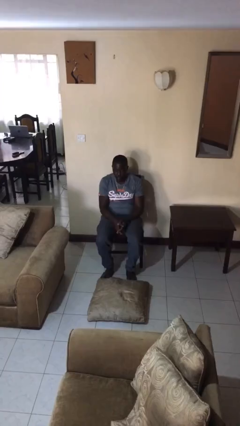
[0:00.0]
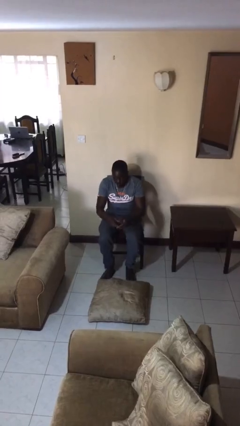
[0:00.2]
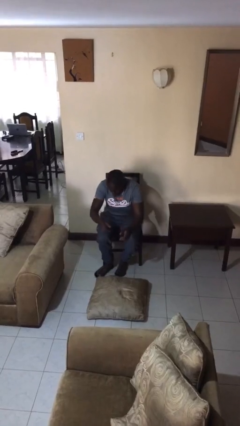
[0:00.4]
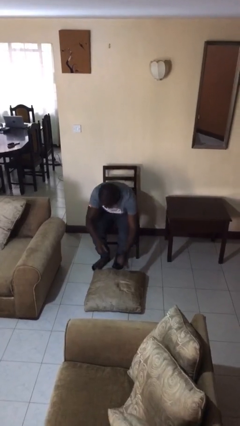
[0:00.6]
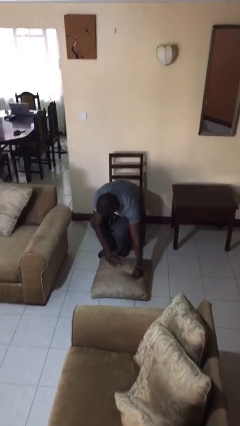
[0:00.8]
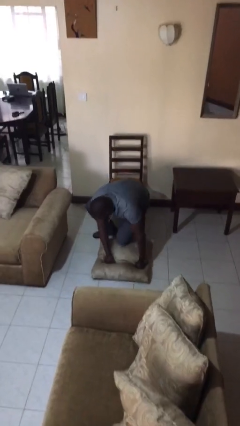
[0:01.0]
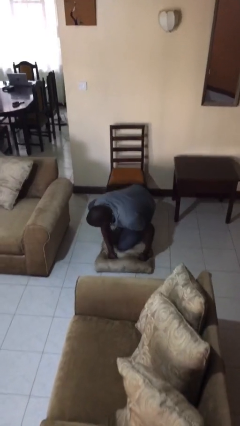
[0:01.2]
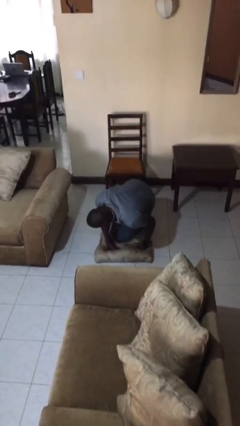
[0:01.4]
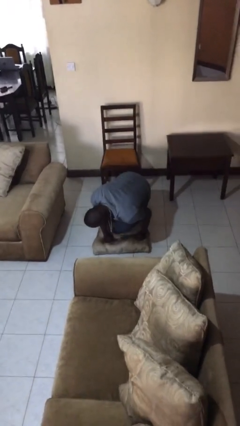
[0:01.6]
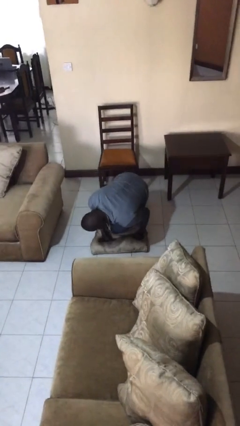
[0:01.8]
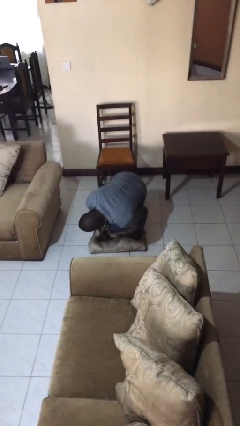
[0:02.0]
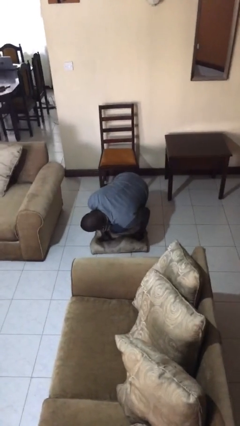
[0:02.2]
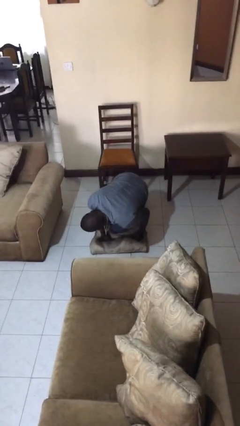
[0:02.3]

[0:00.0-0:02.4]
person falls from chair

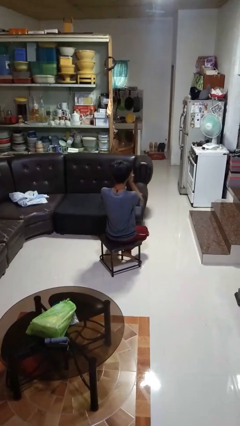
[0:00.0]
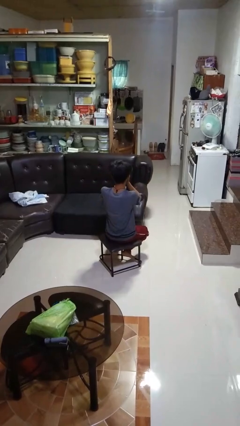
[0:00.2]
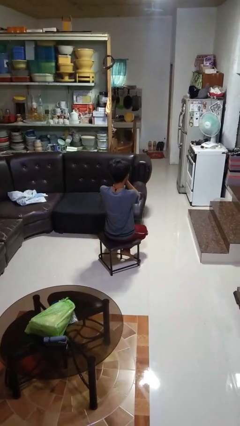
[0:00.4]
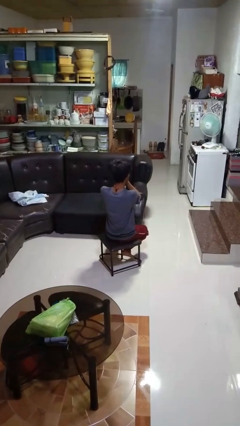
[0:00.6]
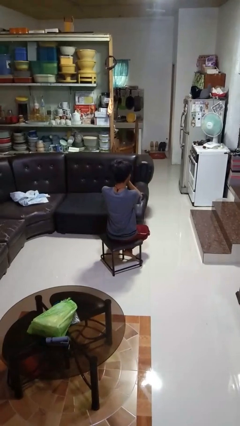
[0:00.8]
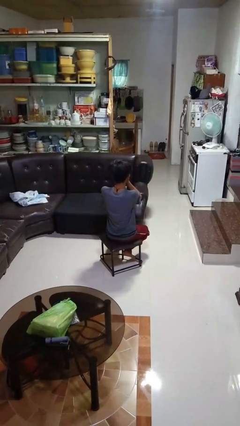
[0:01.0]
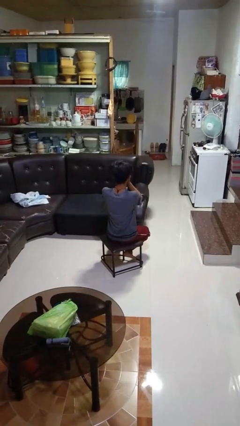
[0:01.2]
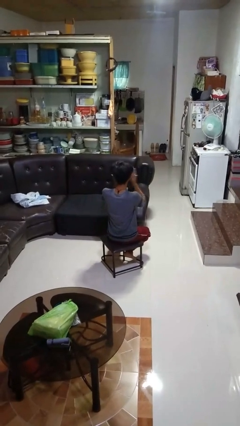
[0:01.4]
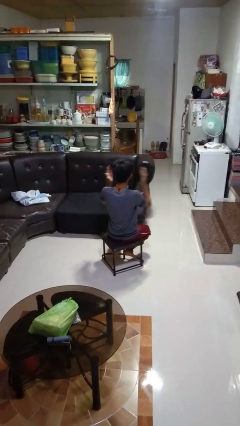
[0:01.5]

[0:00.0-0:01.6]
person covers face with hands

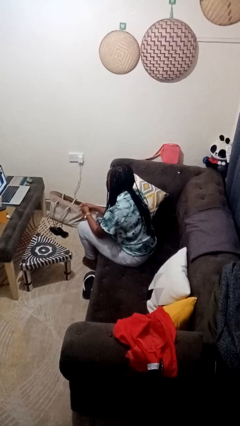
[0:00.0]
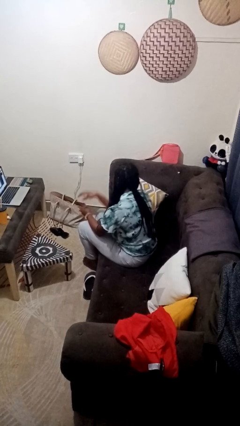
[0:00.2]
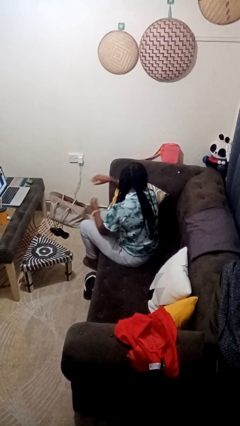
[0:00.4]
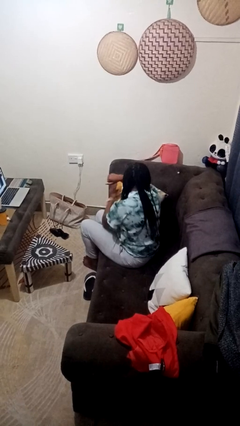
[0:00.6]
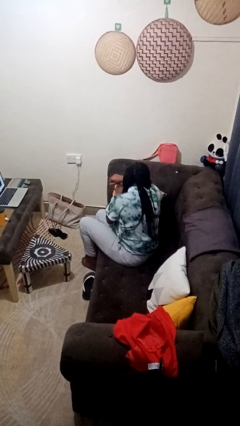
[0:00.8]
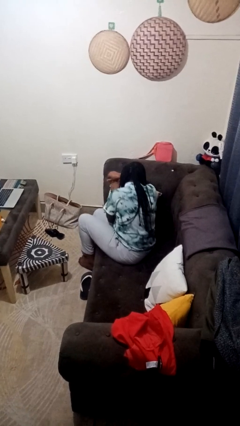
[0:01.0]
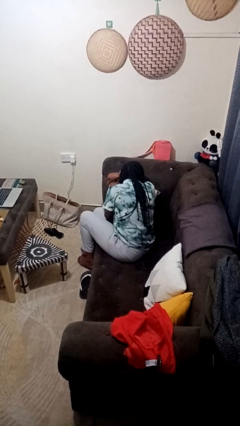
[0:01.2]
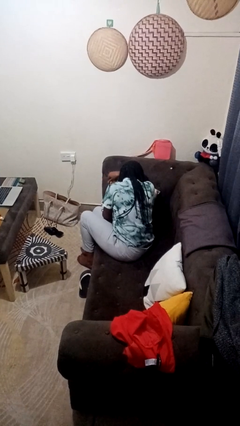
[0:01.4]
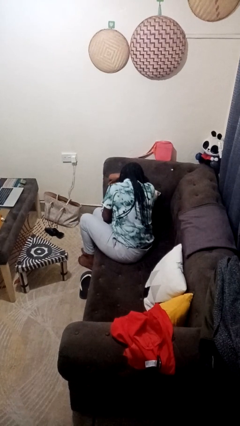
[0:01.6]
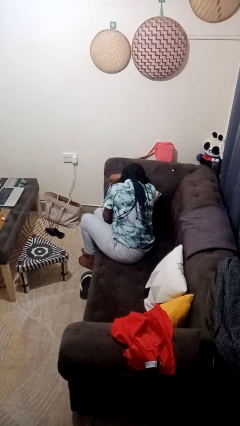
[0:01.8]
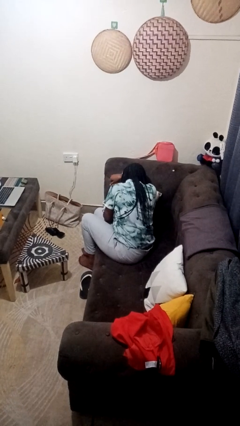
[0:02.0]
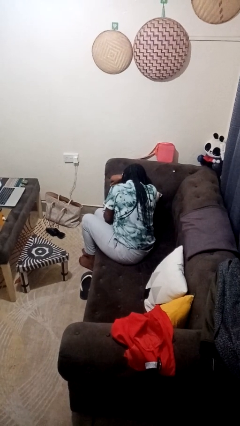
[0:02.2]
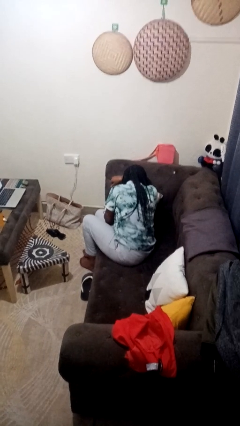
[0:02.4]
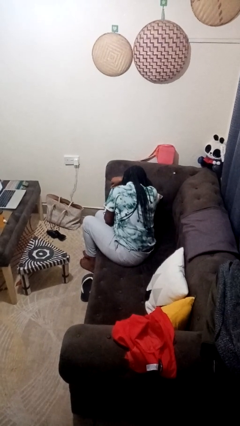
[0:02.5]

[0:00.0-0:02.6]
person lies down on couch

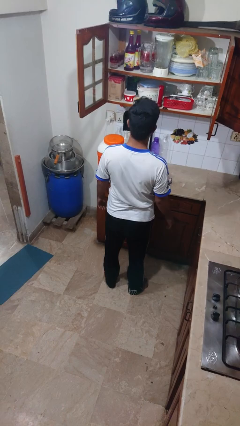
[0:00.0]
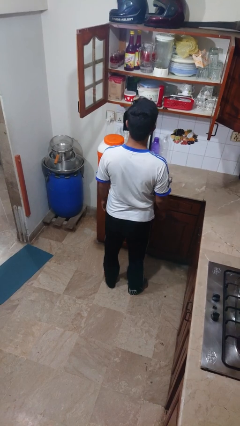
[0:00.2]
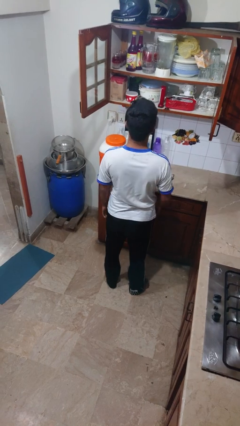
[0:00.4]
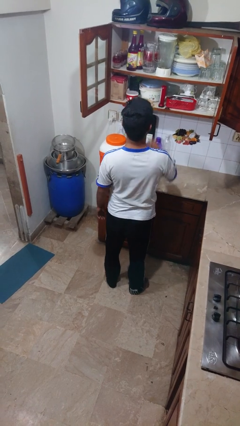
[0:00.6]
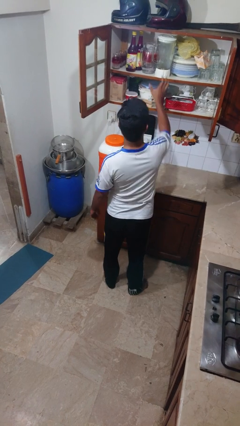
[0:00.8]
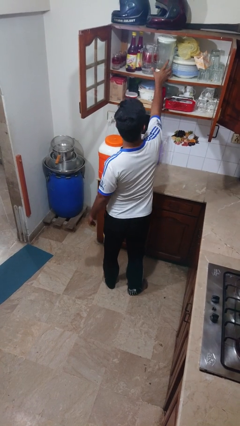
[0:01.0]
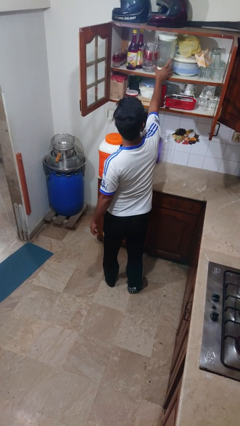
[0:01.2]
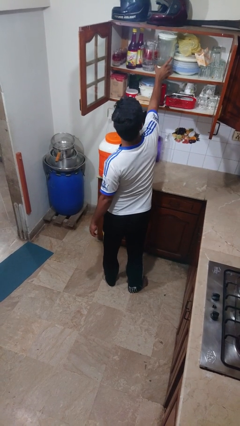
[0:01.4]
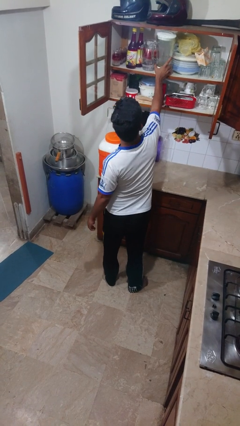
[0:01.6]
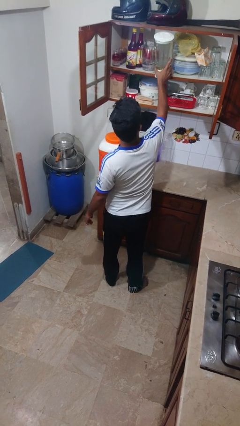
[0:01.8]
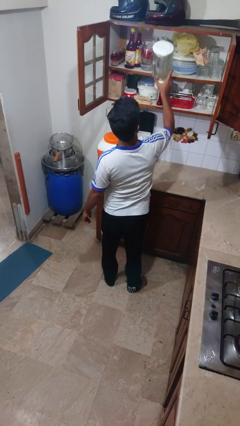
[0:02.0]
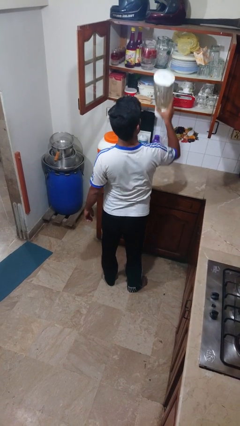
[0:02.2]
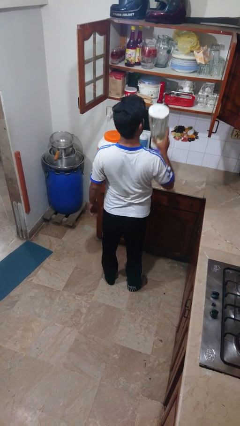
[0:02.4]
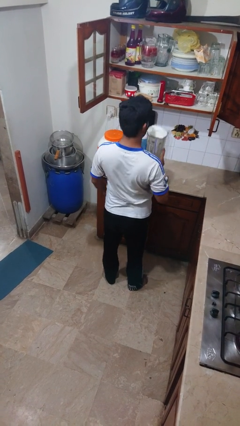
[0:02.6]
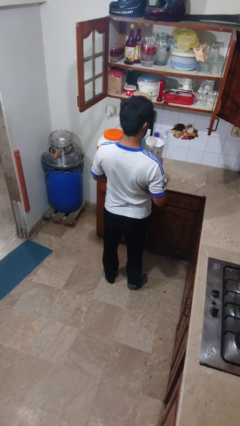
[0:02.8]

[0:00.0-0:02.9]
person picks up object from cabinet

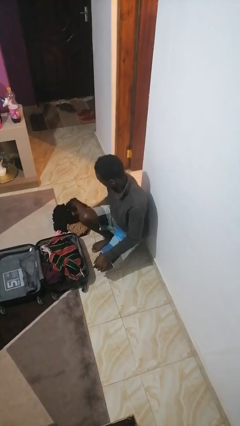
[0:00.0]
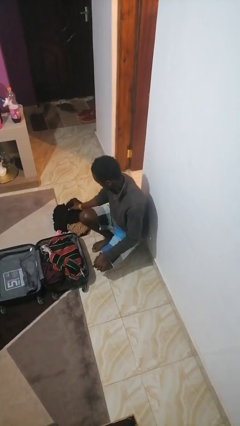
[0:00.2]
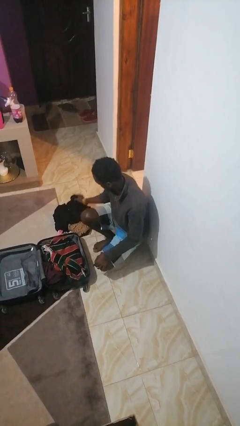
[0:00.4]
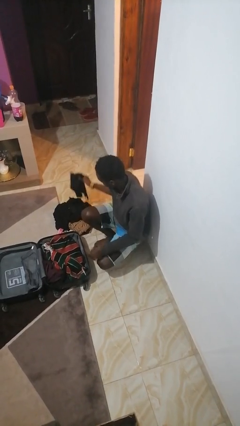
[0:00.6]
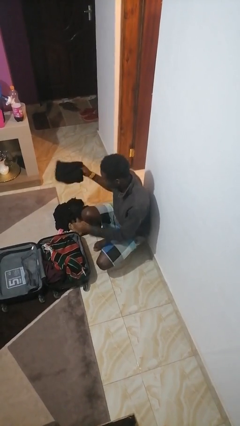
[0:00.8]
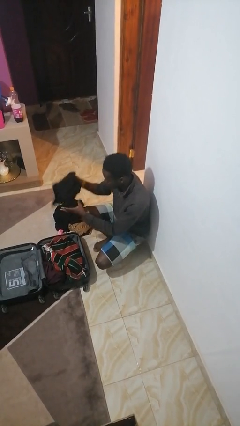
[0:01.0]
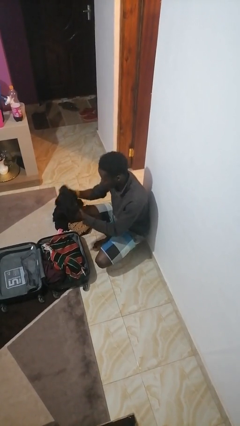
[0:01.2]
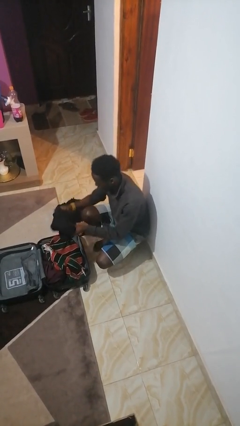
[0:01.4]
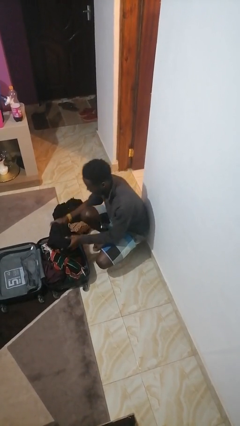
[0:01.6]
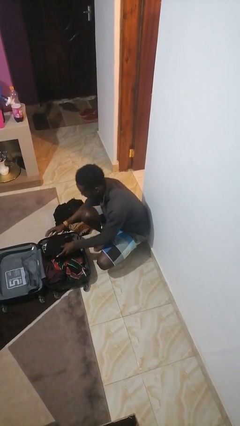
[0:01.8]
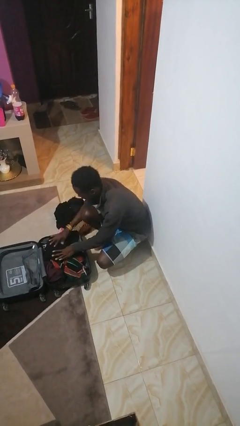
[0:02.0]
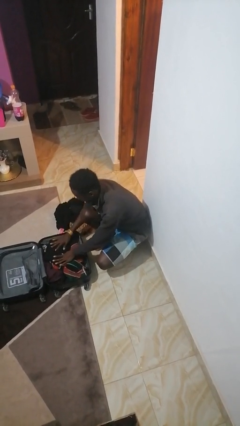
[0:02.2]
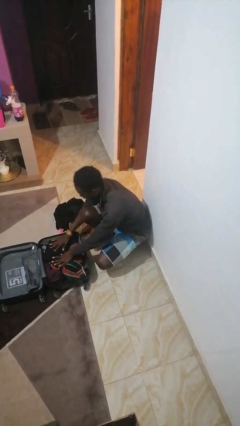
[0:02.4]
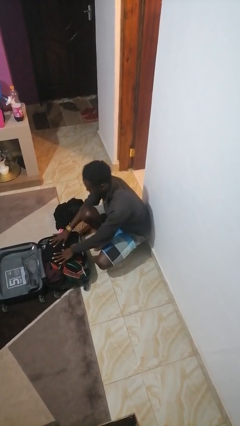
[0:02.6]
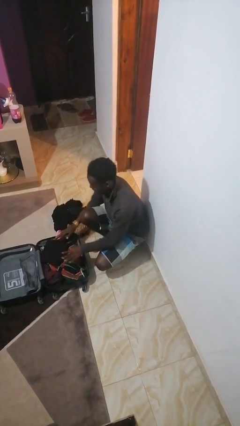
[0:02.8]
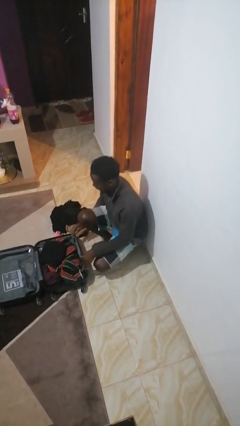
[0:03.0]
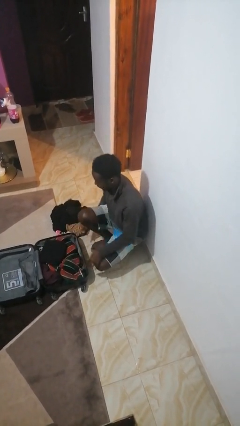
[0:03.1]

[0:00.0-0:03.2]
person loads clothes into suitcase

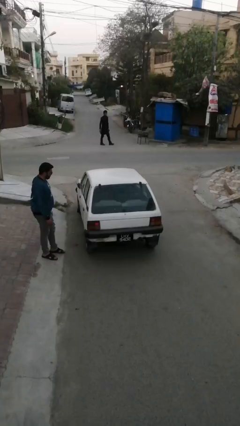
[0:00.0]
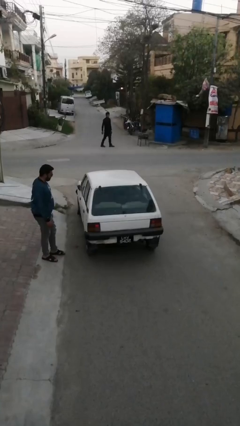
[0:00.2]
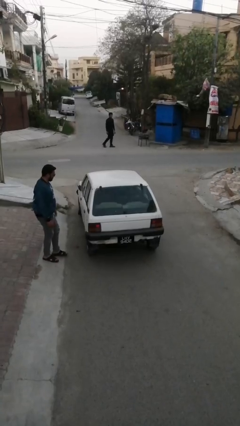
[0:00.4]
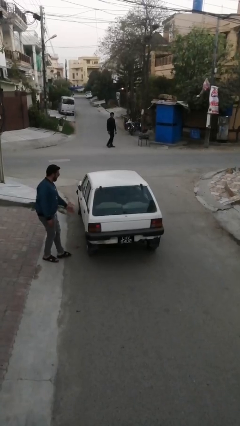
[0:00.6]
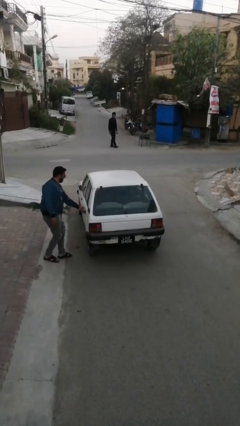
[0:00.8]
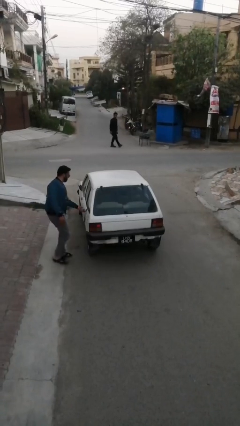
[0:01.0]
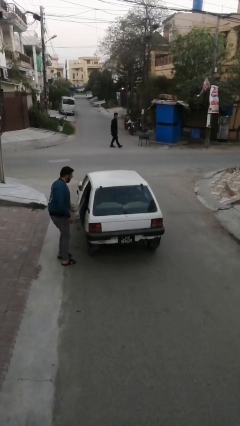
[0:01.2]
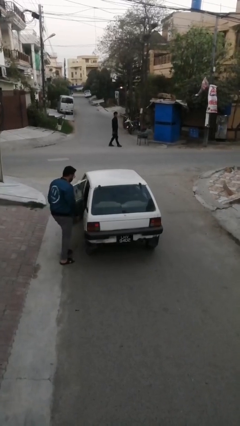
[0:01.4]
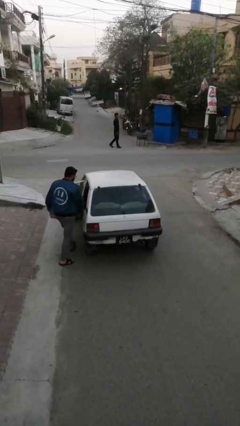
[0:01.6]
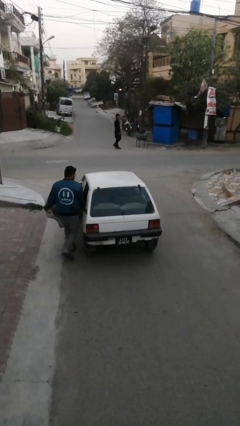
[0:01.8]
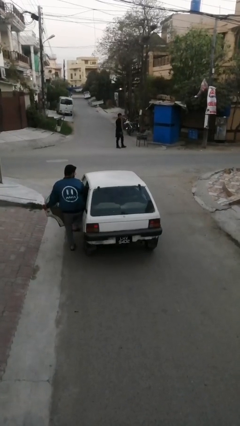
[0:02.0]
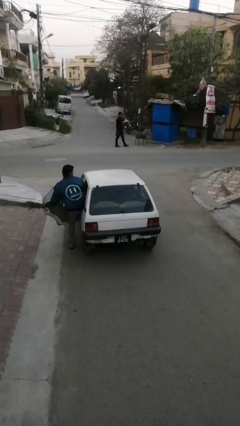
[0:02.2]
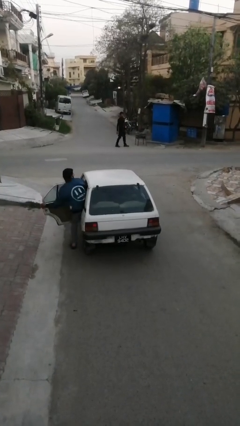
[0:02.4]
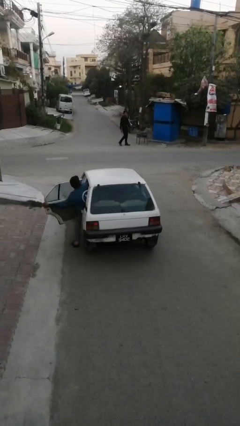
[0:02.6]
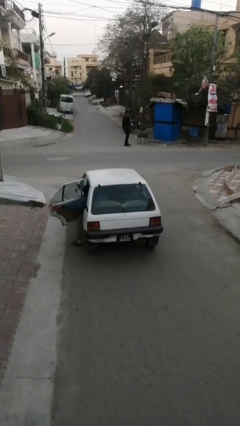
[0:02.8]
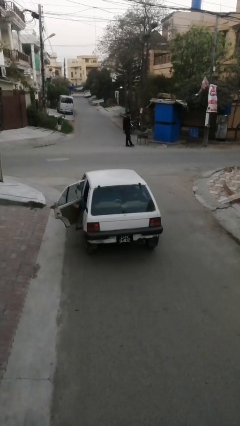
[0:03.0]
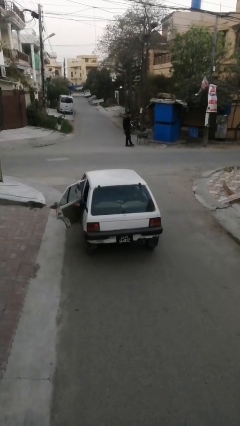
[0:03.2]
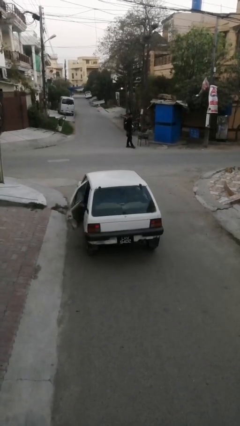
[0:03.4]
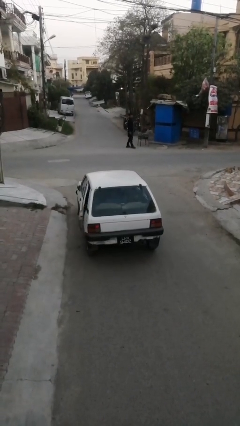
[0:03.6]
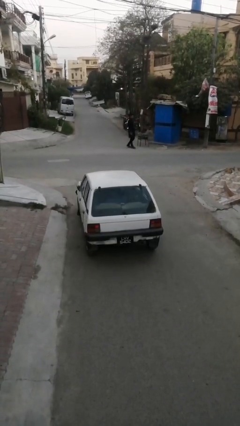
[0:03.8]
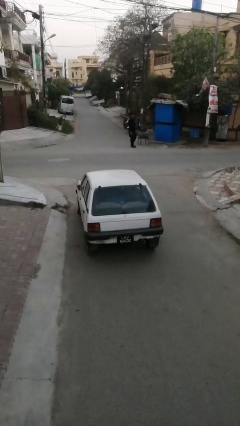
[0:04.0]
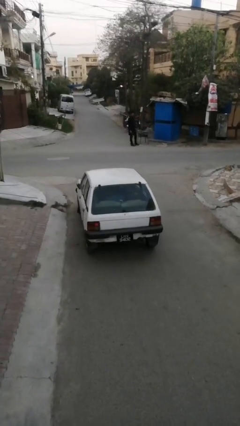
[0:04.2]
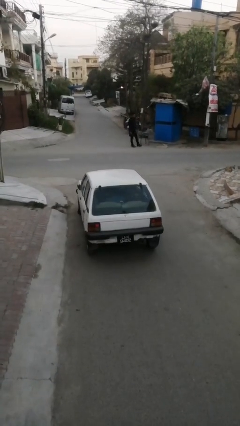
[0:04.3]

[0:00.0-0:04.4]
car picks up person

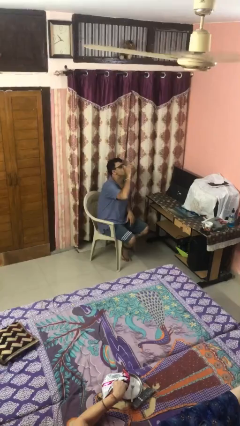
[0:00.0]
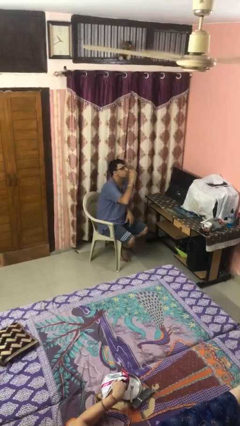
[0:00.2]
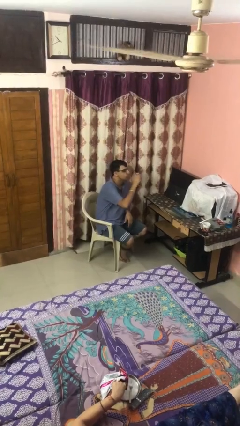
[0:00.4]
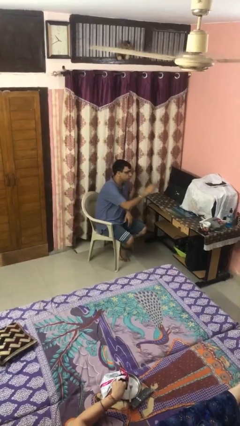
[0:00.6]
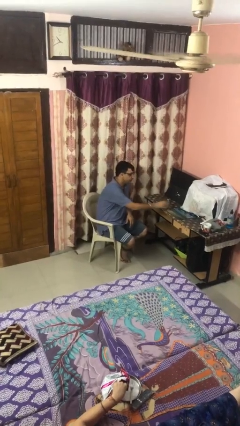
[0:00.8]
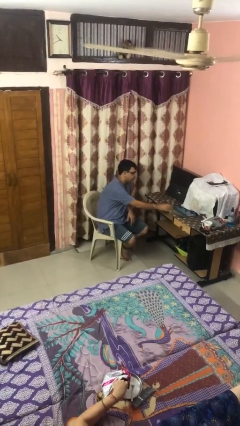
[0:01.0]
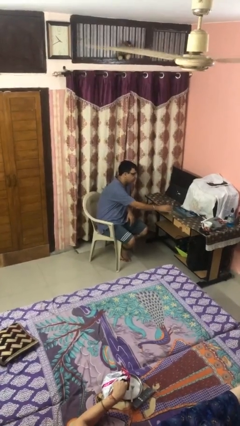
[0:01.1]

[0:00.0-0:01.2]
person puts down object on table
